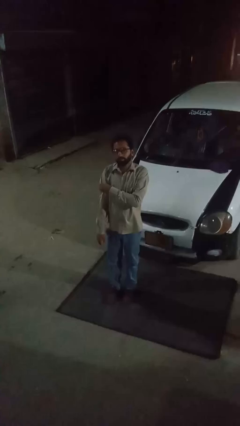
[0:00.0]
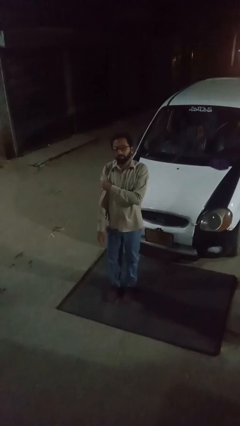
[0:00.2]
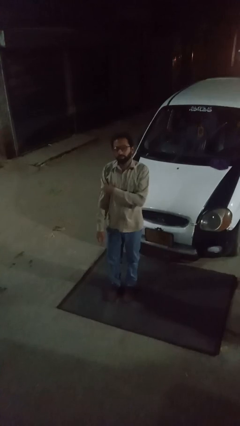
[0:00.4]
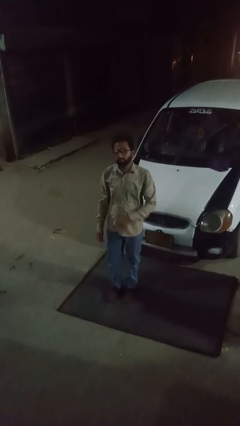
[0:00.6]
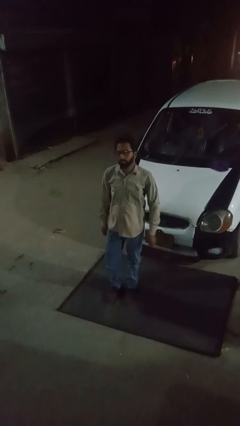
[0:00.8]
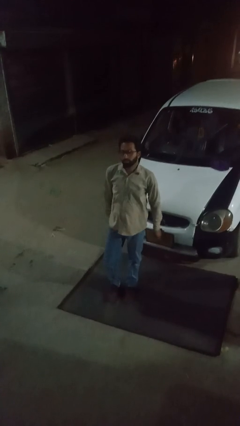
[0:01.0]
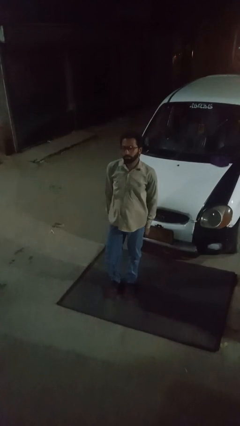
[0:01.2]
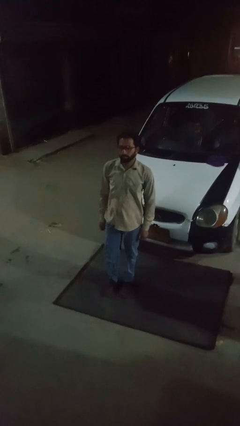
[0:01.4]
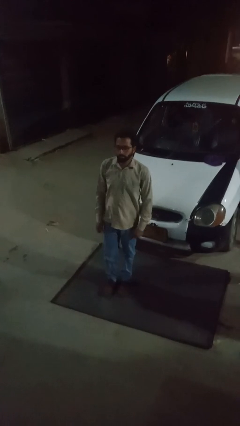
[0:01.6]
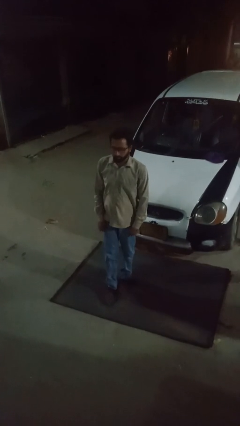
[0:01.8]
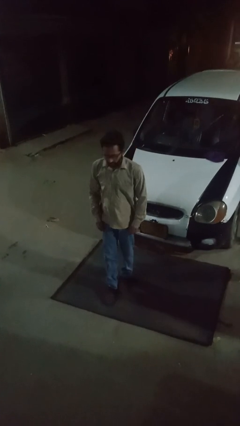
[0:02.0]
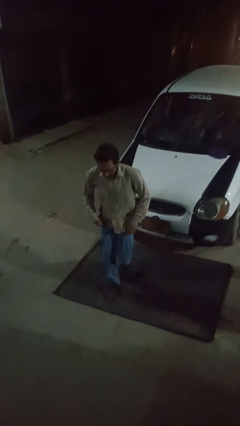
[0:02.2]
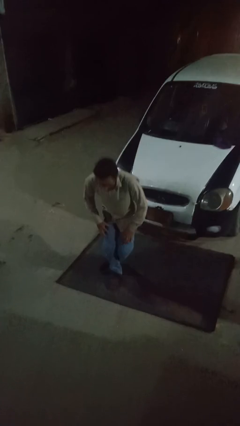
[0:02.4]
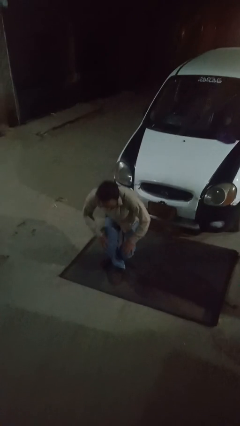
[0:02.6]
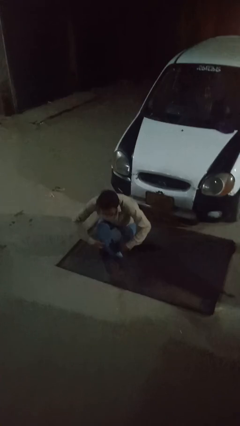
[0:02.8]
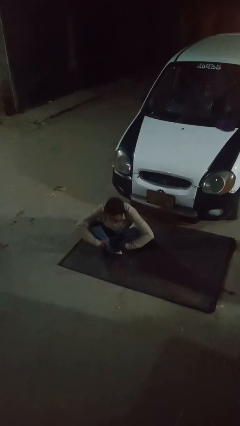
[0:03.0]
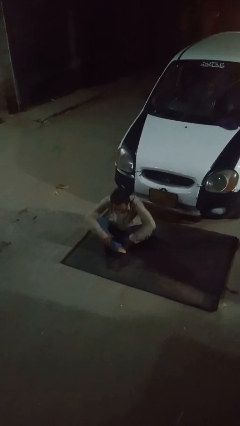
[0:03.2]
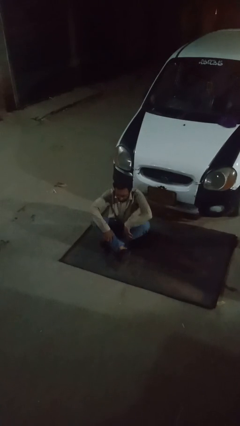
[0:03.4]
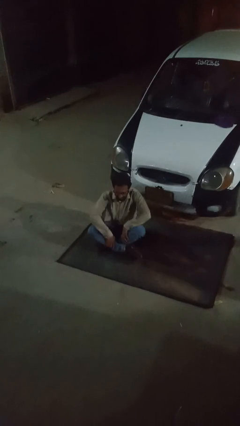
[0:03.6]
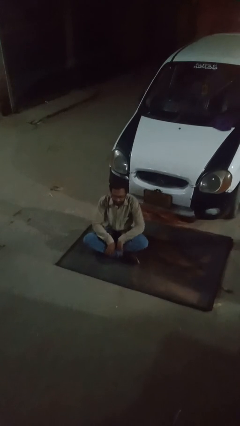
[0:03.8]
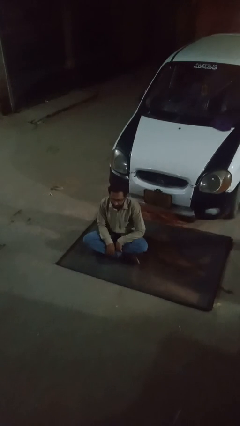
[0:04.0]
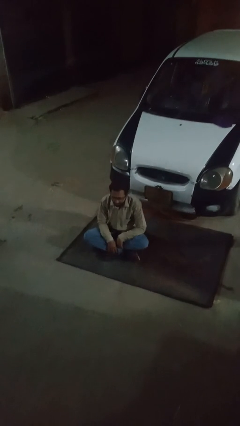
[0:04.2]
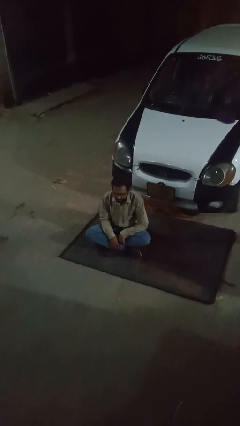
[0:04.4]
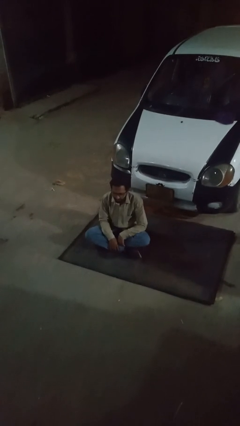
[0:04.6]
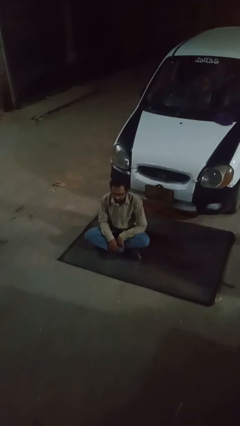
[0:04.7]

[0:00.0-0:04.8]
person sits crisscross

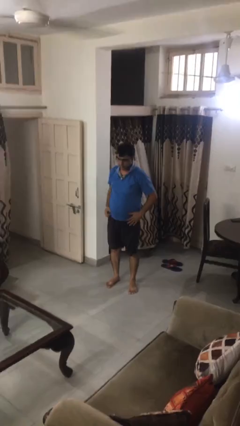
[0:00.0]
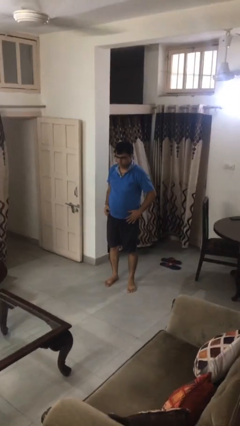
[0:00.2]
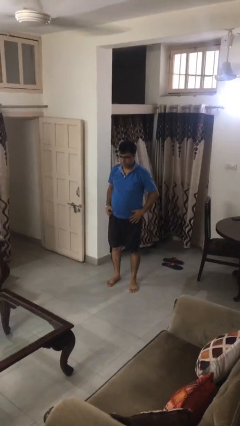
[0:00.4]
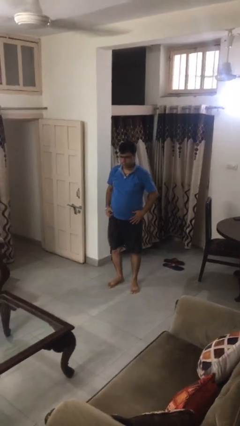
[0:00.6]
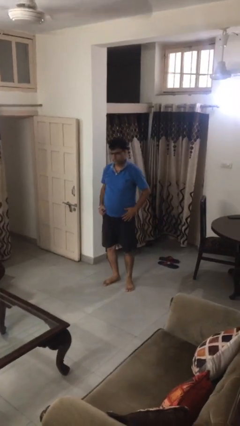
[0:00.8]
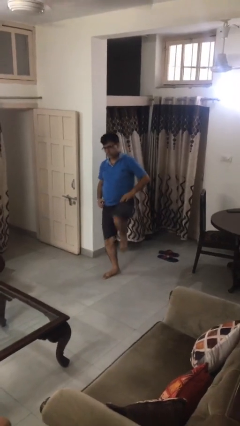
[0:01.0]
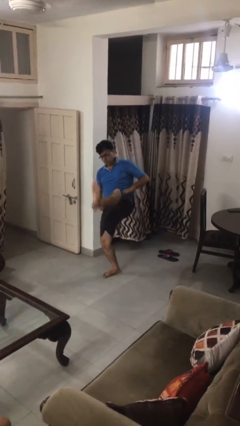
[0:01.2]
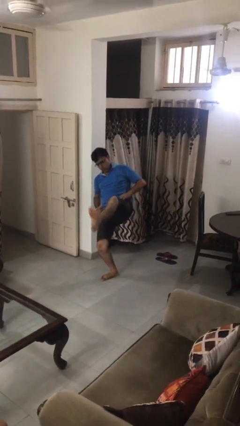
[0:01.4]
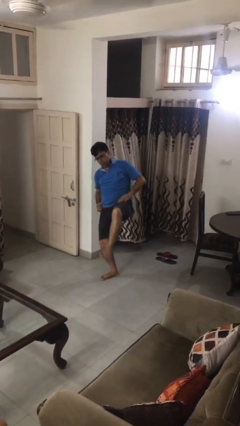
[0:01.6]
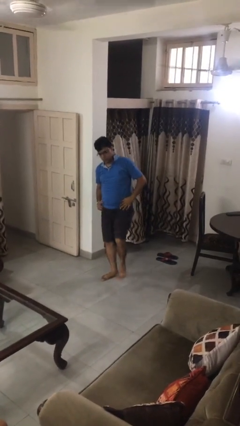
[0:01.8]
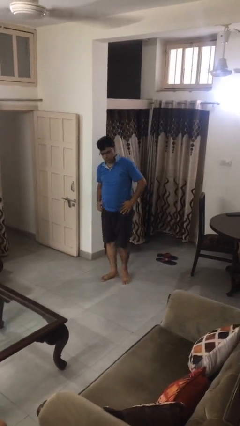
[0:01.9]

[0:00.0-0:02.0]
person karate kicks

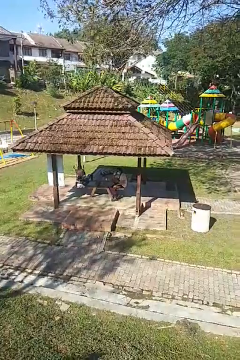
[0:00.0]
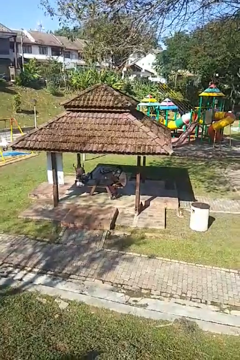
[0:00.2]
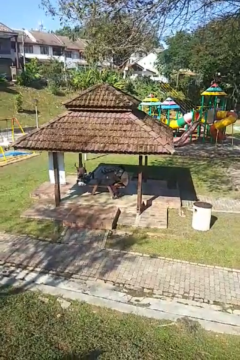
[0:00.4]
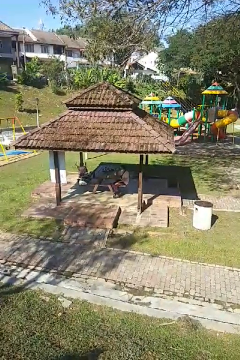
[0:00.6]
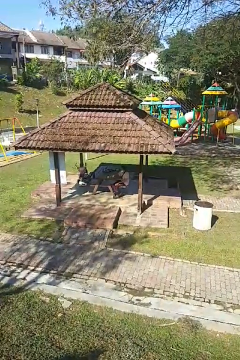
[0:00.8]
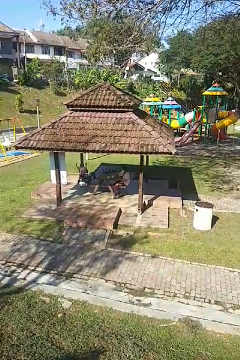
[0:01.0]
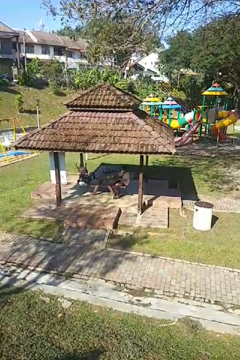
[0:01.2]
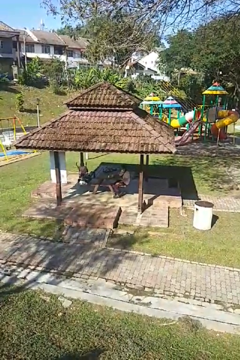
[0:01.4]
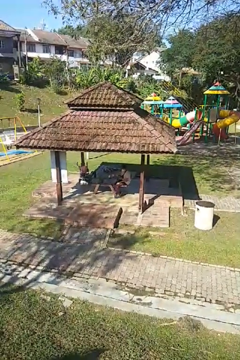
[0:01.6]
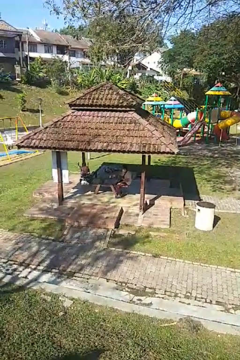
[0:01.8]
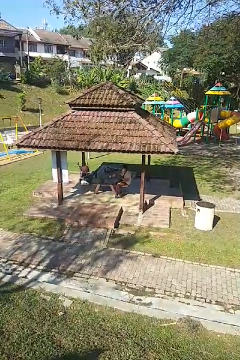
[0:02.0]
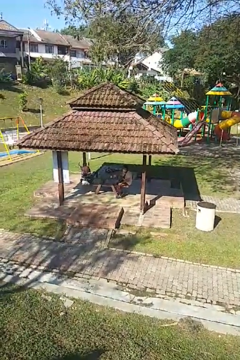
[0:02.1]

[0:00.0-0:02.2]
person puts down object on table

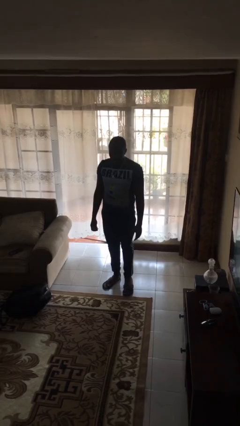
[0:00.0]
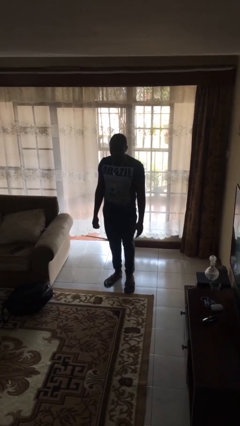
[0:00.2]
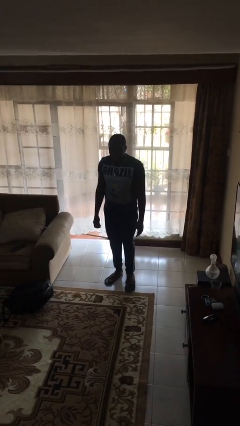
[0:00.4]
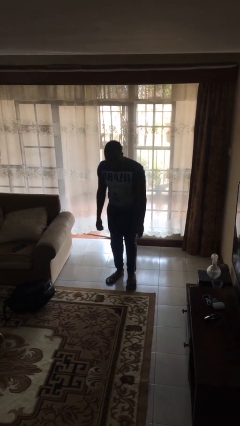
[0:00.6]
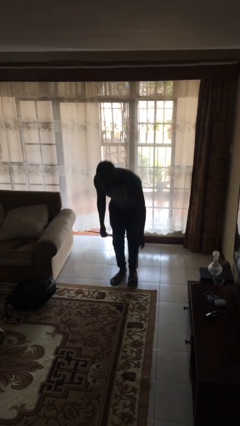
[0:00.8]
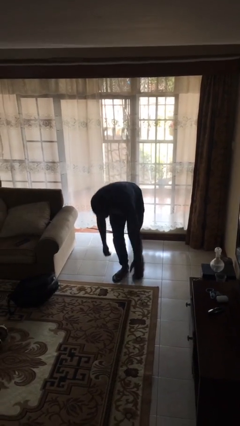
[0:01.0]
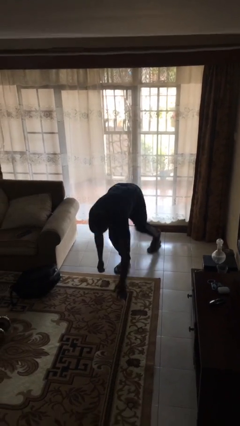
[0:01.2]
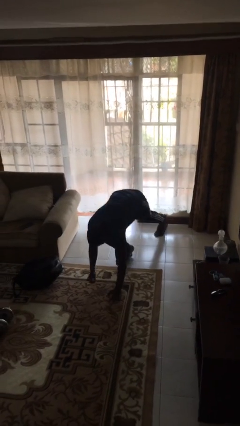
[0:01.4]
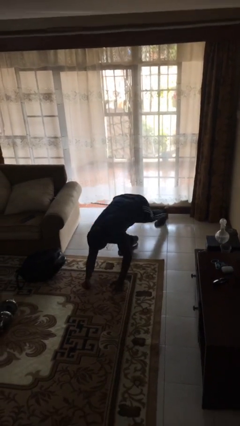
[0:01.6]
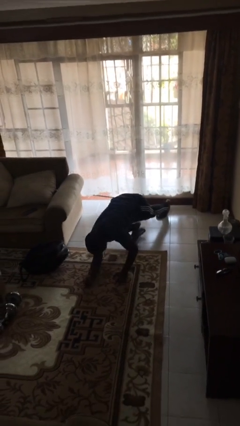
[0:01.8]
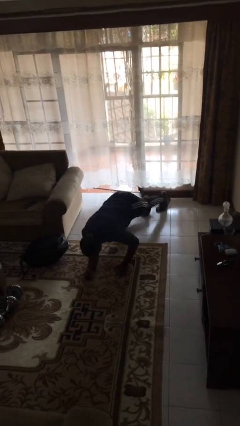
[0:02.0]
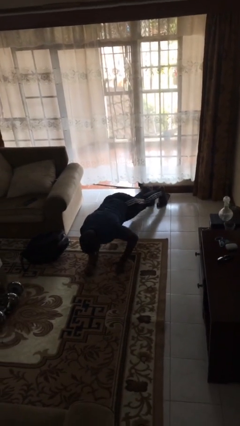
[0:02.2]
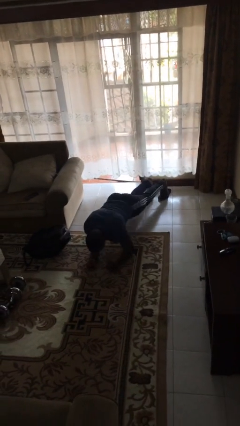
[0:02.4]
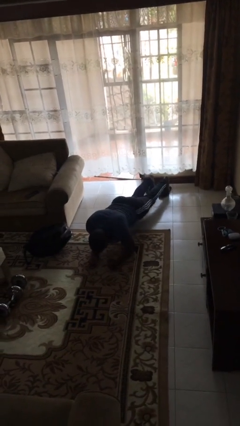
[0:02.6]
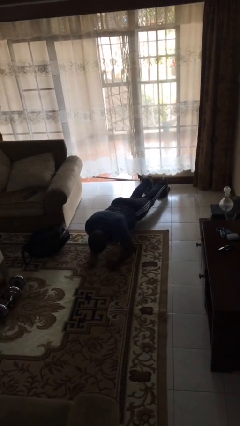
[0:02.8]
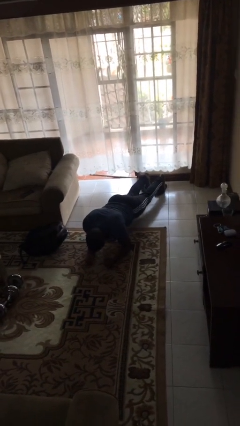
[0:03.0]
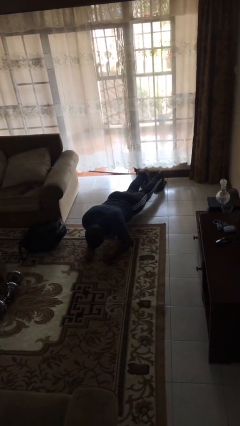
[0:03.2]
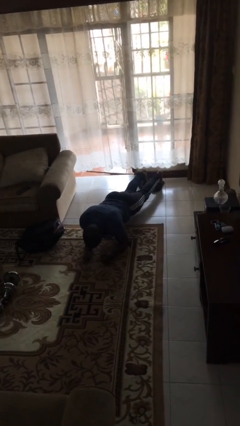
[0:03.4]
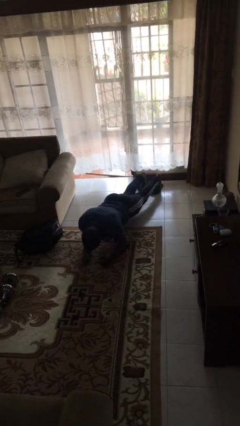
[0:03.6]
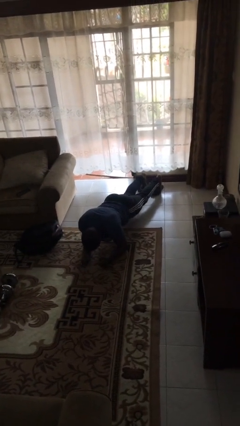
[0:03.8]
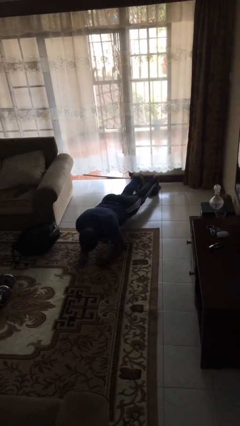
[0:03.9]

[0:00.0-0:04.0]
person exercises with plank

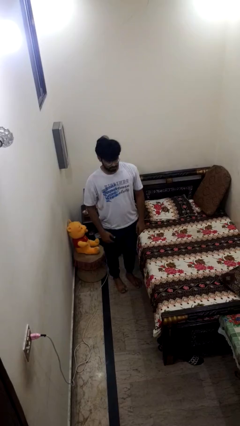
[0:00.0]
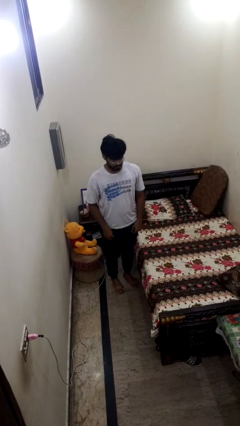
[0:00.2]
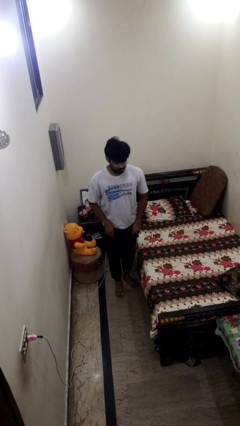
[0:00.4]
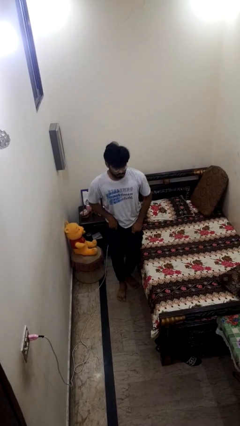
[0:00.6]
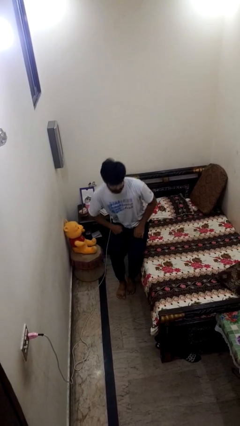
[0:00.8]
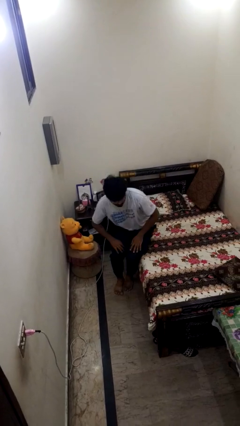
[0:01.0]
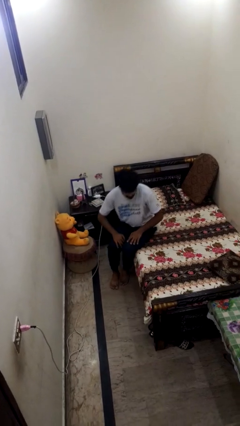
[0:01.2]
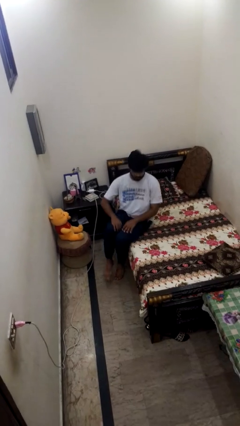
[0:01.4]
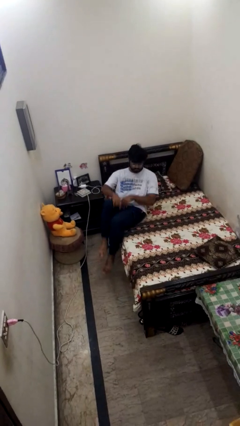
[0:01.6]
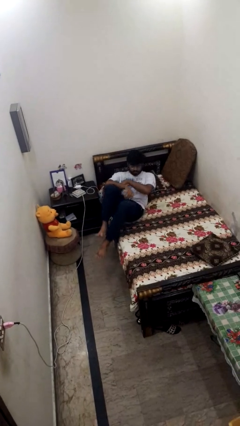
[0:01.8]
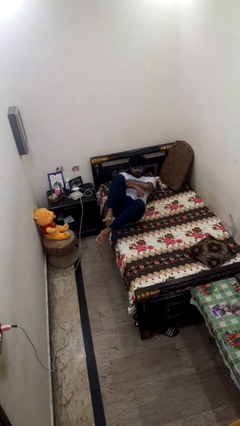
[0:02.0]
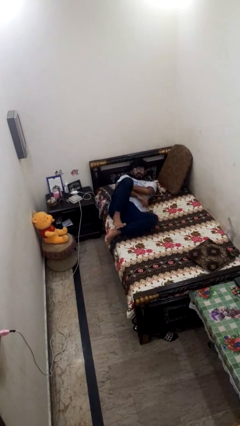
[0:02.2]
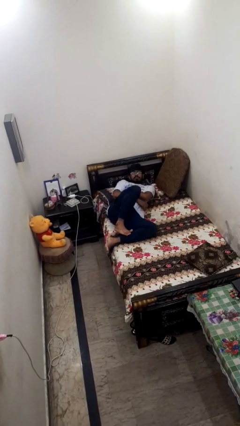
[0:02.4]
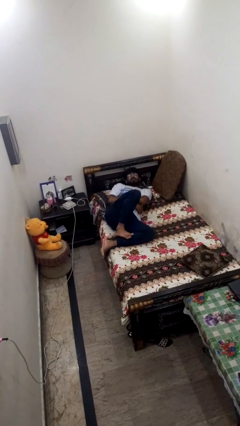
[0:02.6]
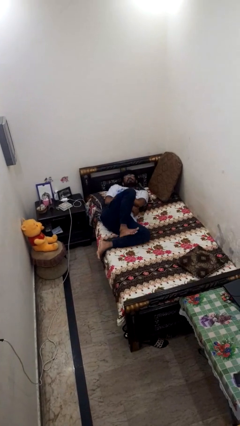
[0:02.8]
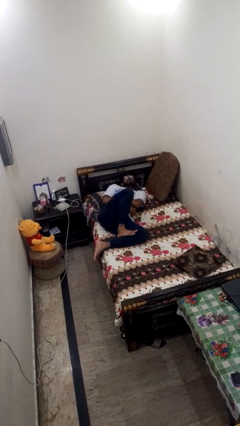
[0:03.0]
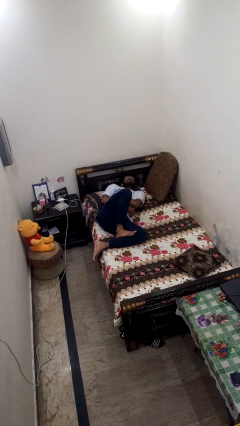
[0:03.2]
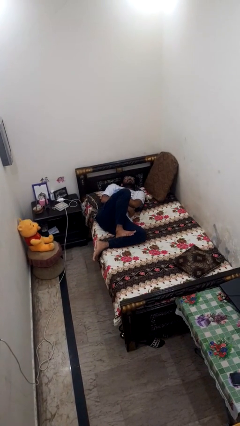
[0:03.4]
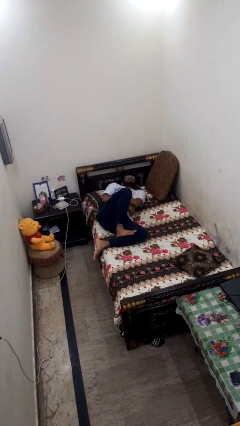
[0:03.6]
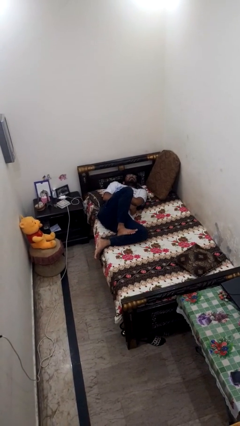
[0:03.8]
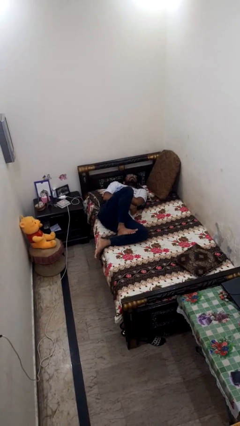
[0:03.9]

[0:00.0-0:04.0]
person lies down on bed

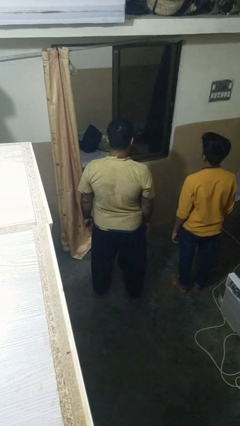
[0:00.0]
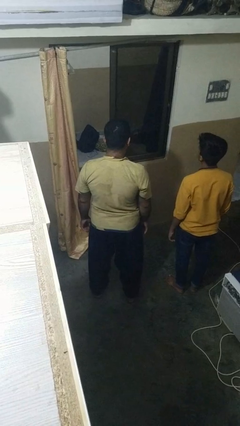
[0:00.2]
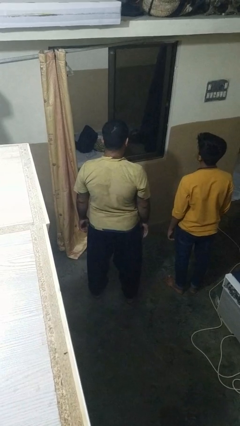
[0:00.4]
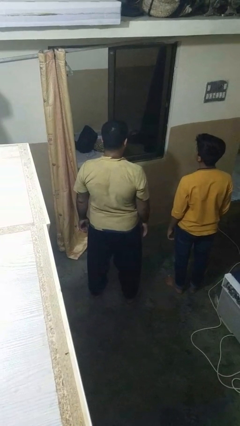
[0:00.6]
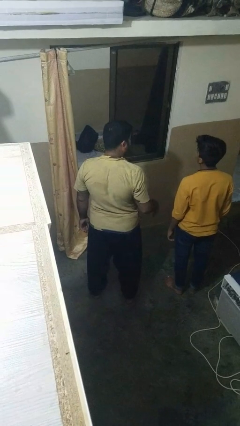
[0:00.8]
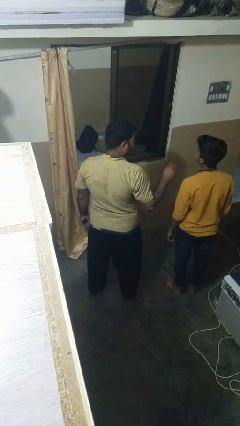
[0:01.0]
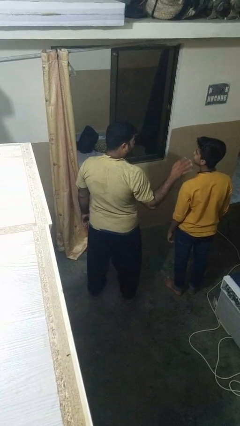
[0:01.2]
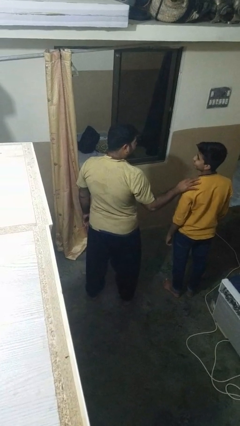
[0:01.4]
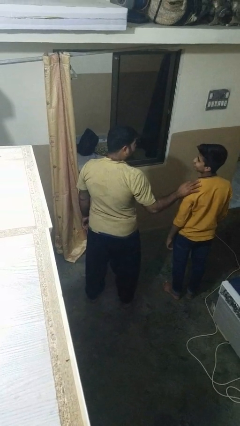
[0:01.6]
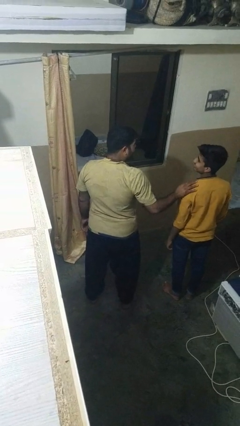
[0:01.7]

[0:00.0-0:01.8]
person pounds shoulders of person
